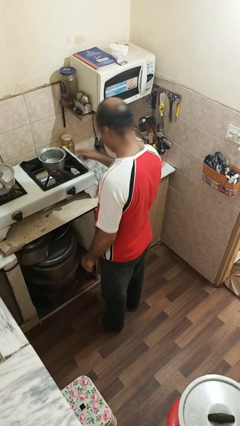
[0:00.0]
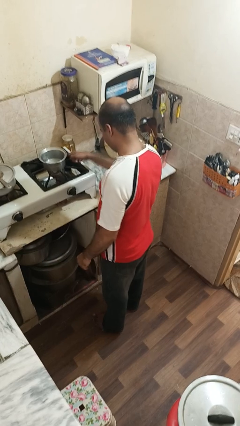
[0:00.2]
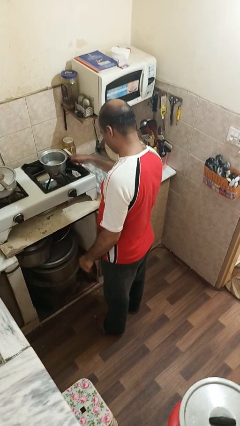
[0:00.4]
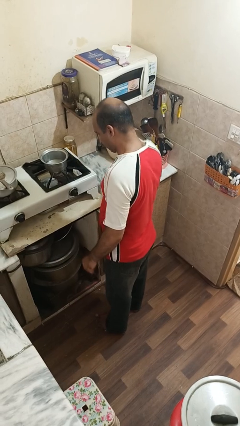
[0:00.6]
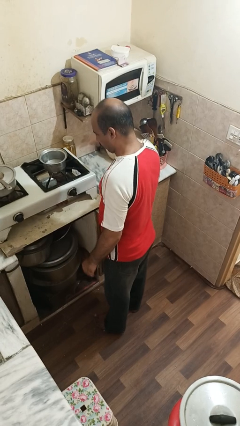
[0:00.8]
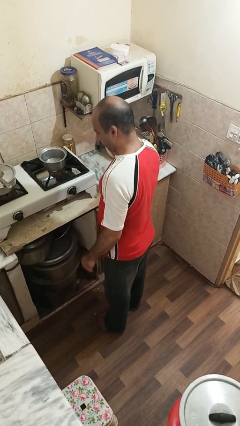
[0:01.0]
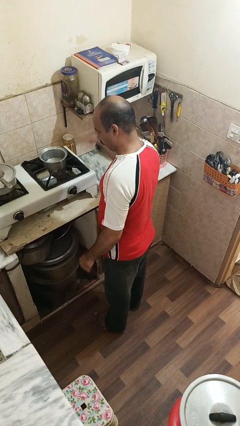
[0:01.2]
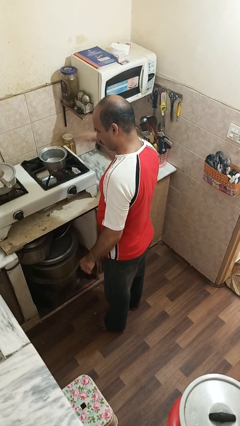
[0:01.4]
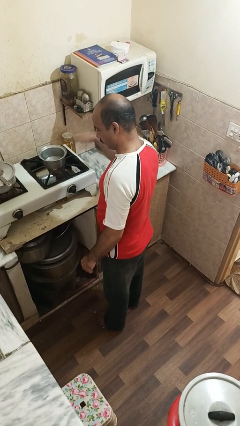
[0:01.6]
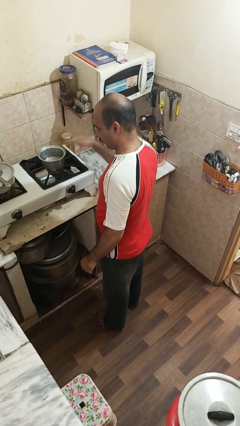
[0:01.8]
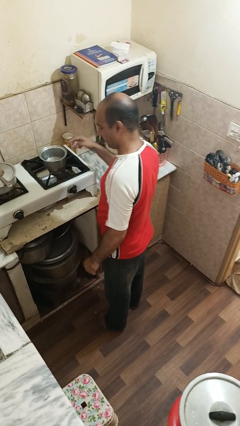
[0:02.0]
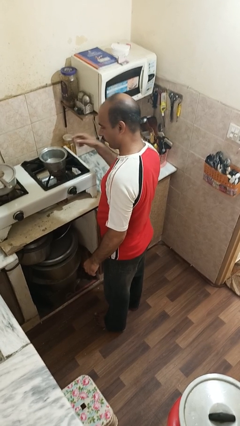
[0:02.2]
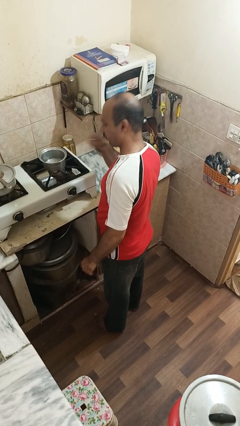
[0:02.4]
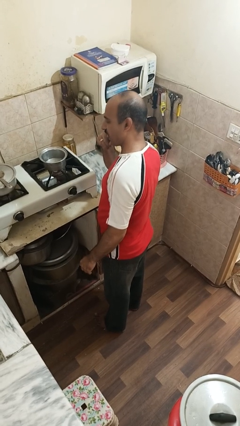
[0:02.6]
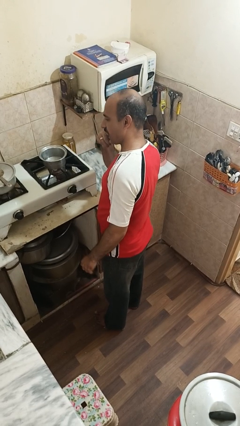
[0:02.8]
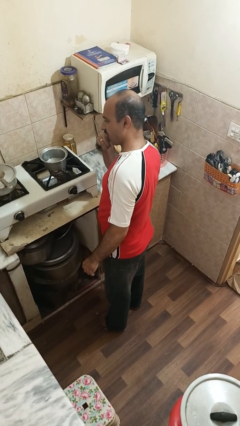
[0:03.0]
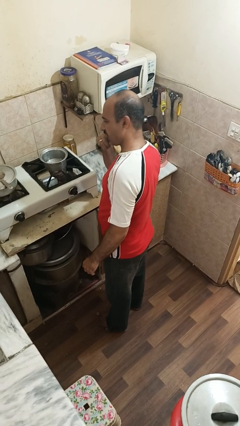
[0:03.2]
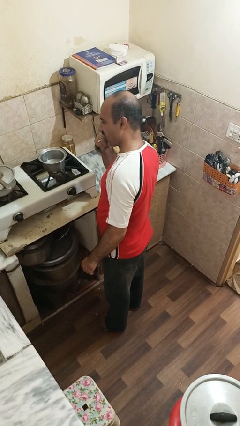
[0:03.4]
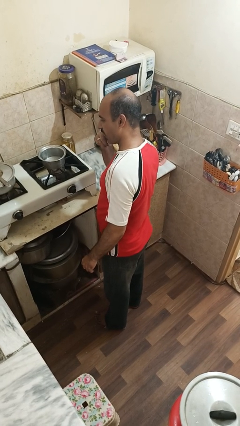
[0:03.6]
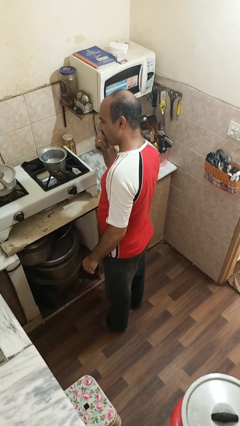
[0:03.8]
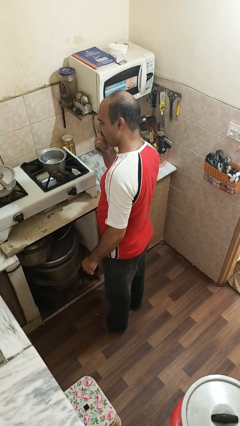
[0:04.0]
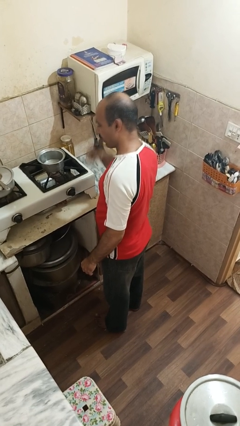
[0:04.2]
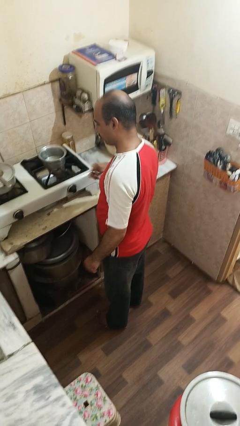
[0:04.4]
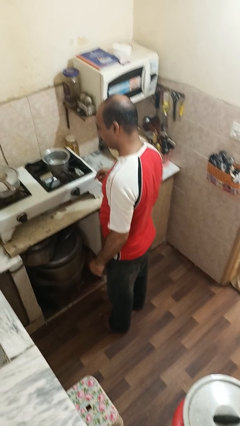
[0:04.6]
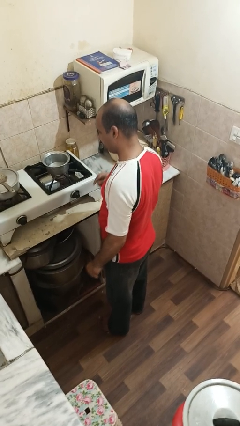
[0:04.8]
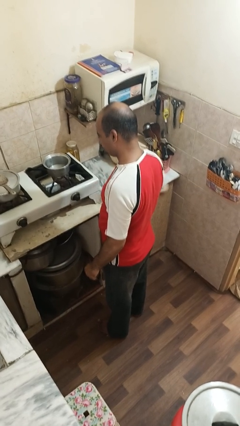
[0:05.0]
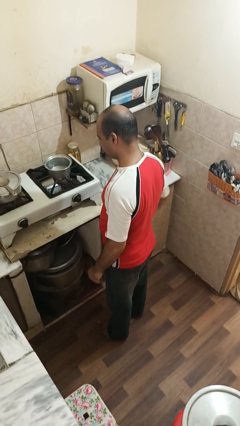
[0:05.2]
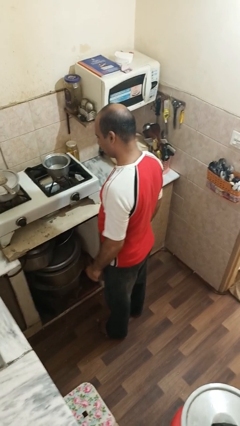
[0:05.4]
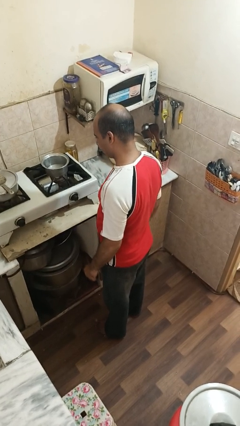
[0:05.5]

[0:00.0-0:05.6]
person burns hand

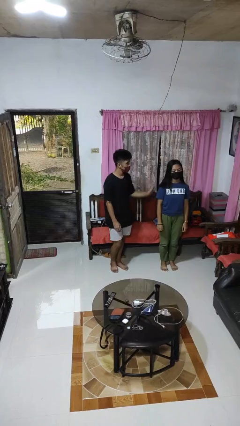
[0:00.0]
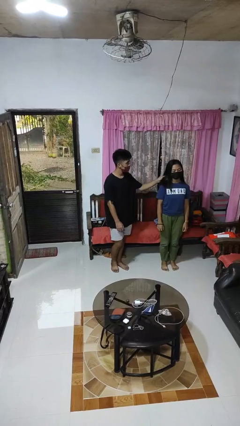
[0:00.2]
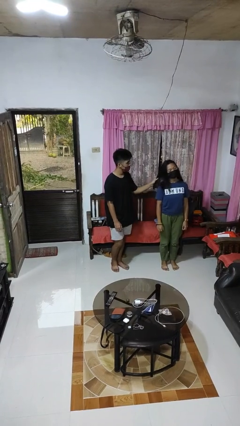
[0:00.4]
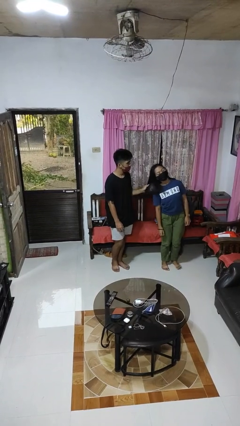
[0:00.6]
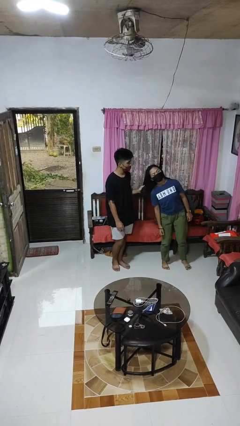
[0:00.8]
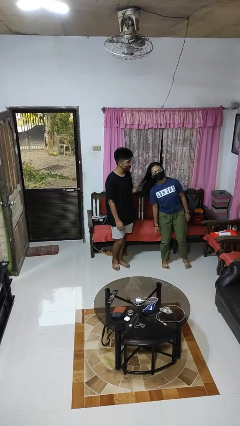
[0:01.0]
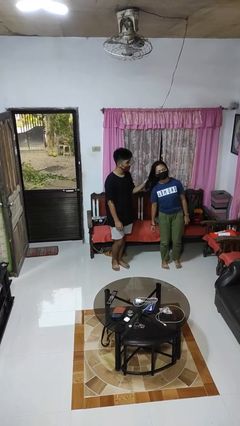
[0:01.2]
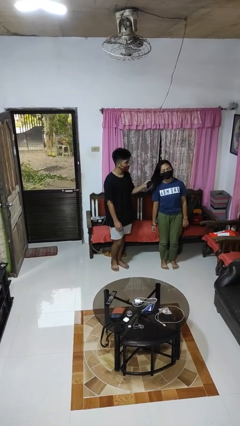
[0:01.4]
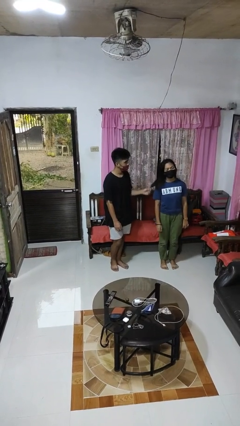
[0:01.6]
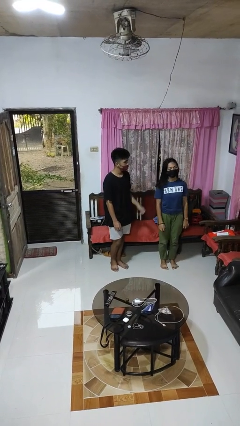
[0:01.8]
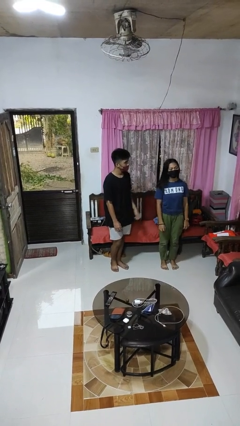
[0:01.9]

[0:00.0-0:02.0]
person grabs person by hair

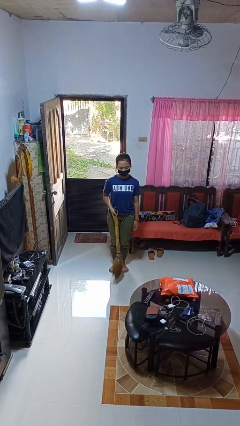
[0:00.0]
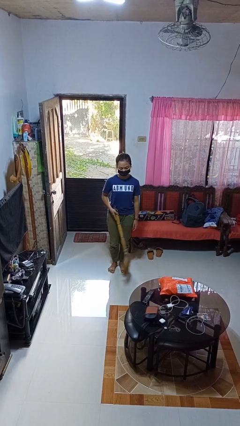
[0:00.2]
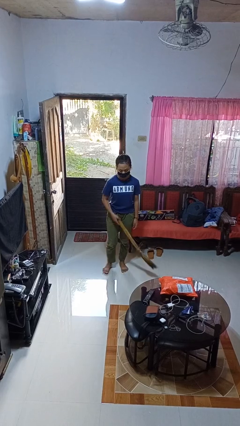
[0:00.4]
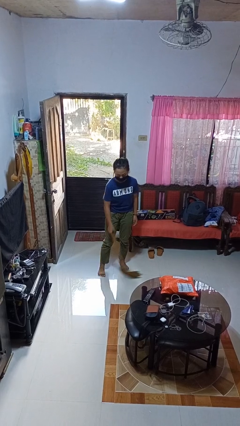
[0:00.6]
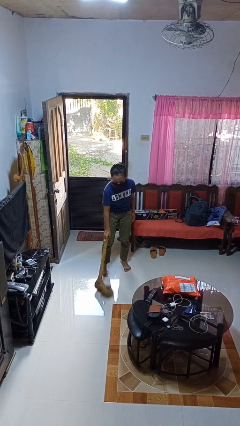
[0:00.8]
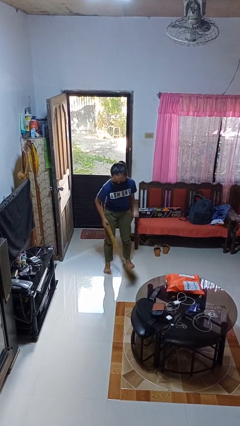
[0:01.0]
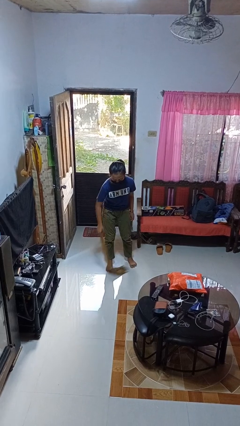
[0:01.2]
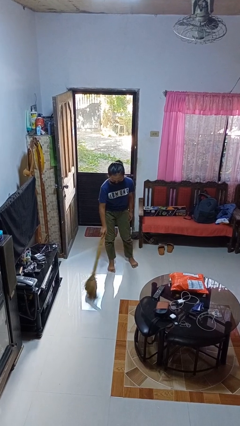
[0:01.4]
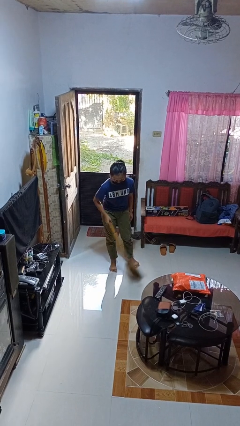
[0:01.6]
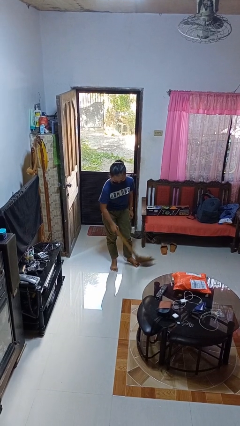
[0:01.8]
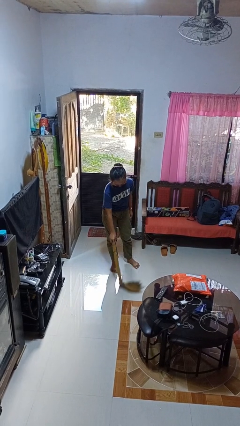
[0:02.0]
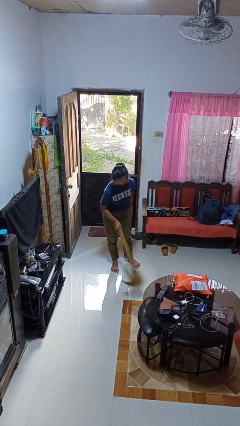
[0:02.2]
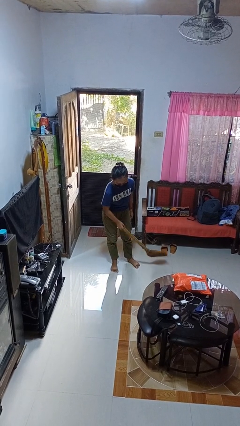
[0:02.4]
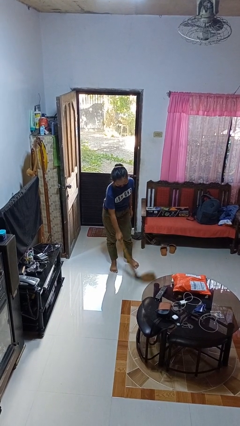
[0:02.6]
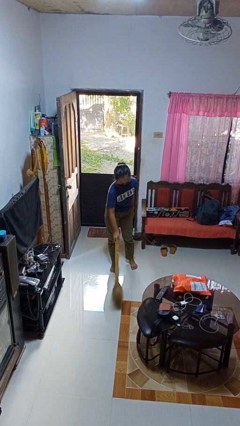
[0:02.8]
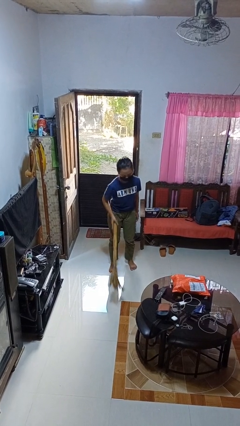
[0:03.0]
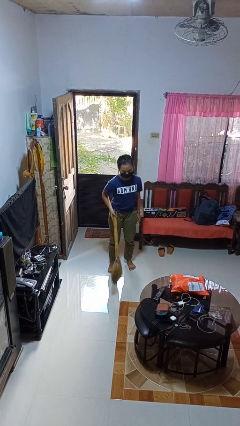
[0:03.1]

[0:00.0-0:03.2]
person sweeps floor

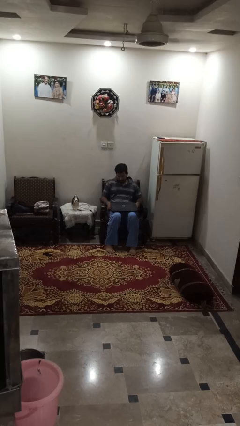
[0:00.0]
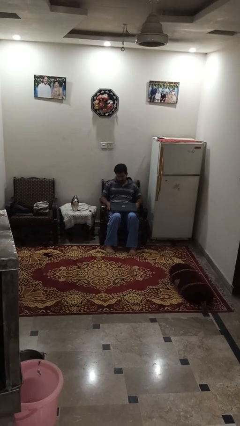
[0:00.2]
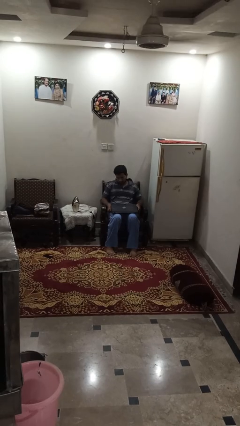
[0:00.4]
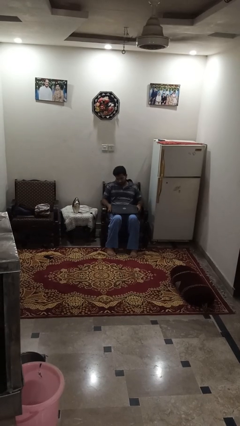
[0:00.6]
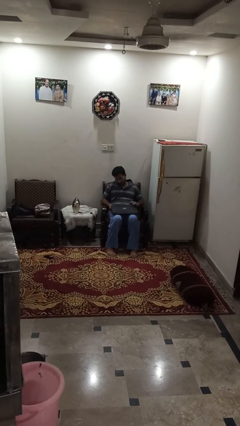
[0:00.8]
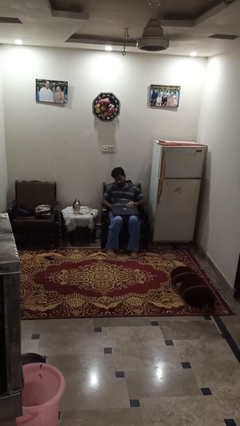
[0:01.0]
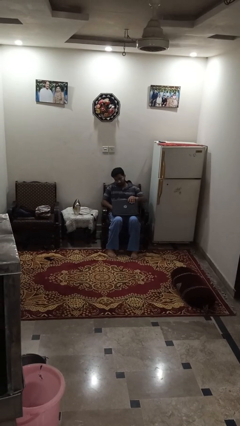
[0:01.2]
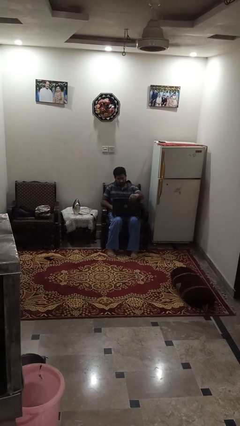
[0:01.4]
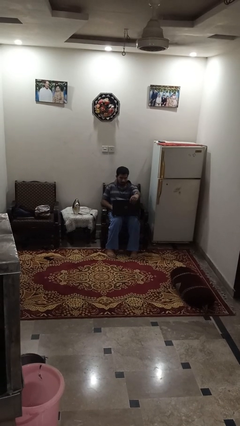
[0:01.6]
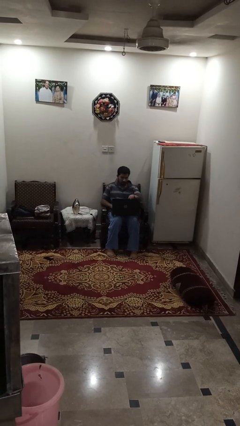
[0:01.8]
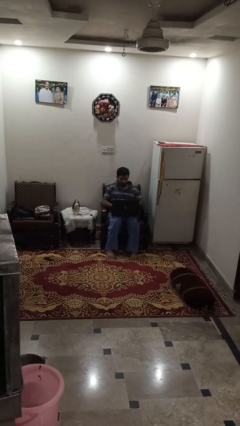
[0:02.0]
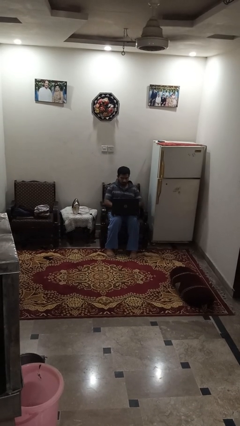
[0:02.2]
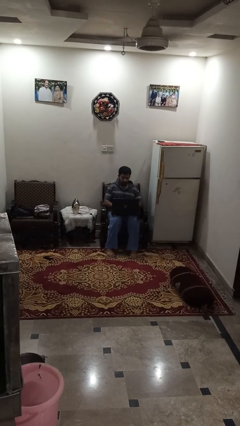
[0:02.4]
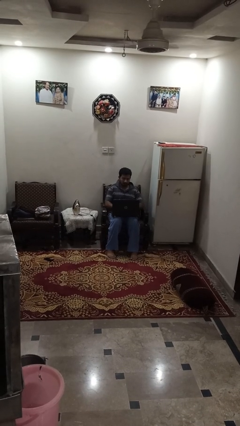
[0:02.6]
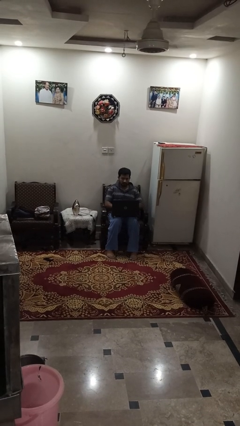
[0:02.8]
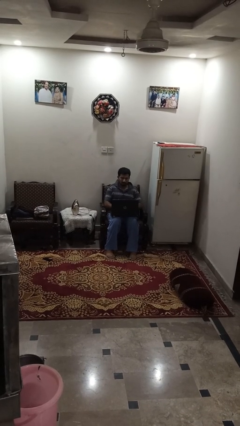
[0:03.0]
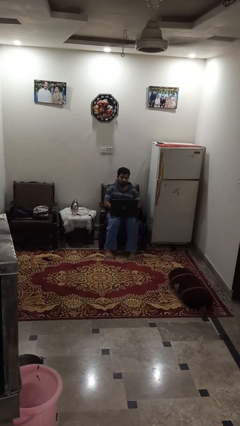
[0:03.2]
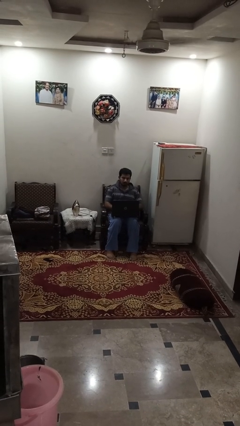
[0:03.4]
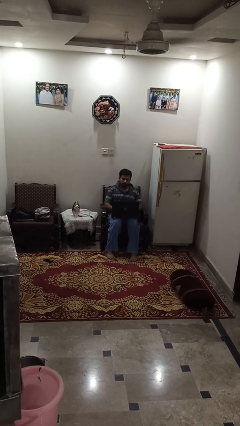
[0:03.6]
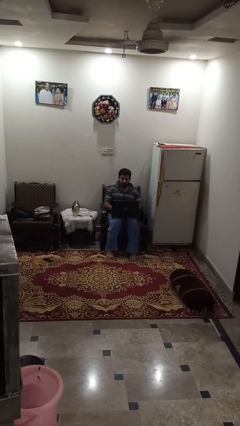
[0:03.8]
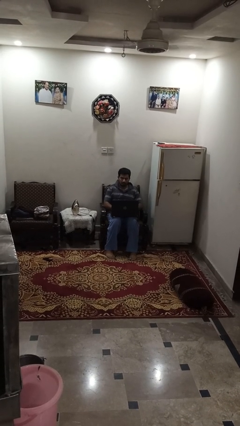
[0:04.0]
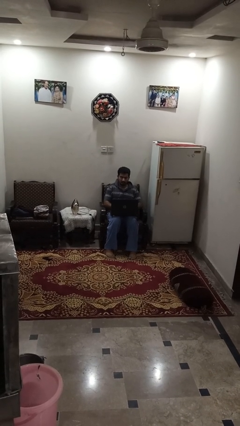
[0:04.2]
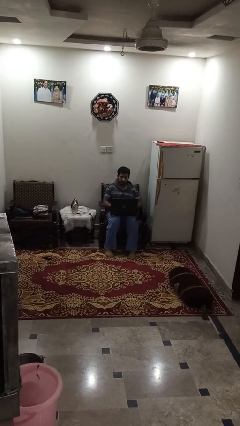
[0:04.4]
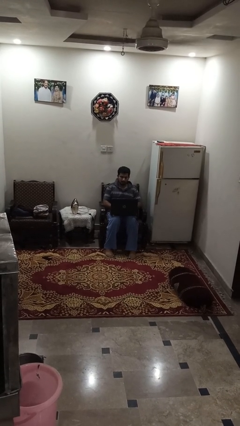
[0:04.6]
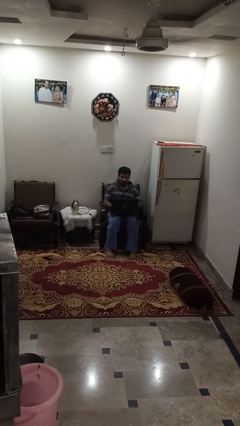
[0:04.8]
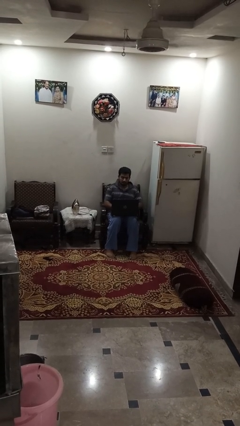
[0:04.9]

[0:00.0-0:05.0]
person opens laptop

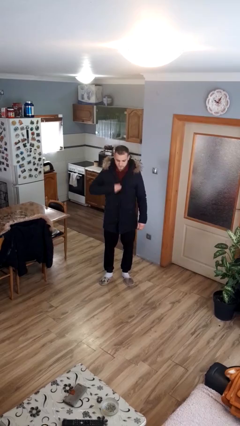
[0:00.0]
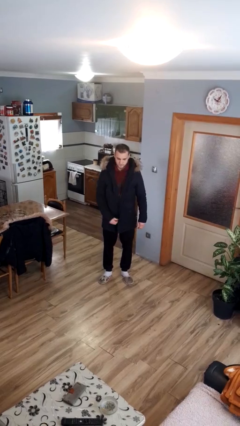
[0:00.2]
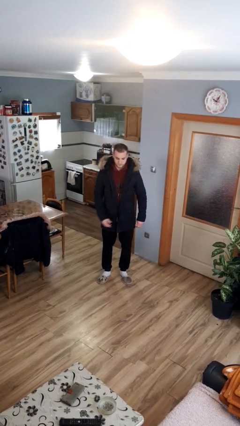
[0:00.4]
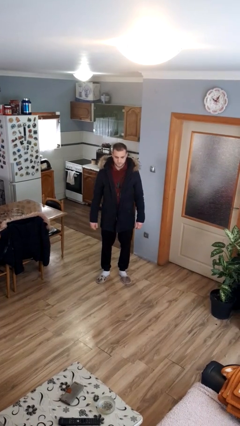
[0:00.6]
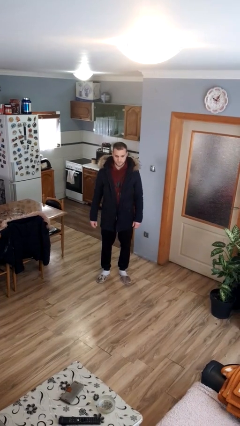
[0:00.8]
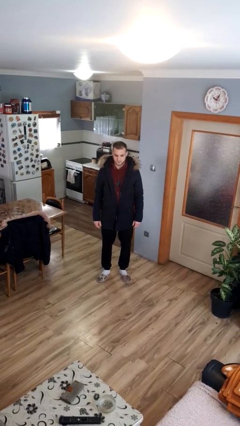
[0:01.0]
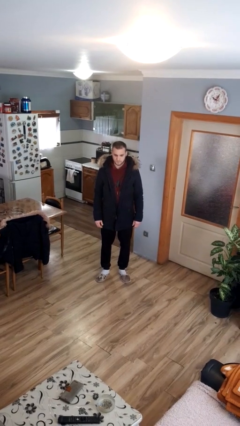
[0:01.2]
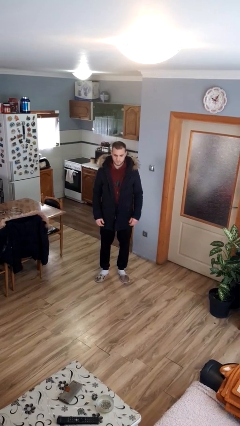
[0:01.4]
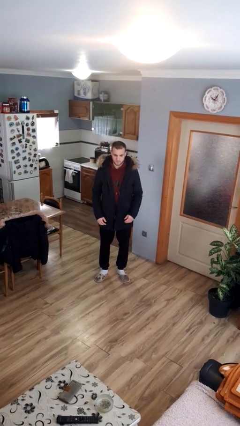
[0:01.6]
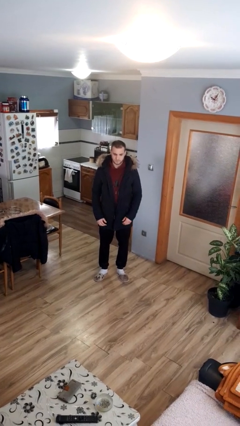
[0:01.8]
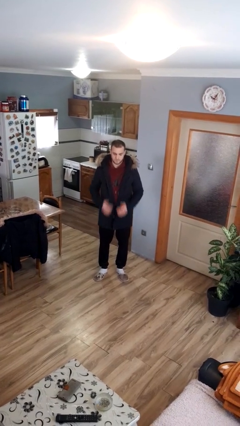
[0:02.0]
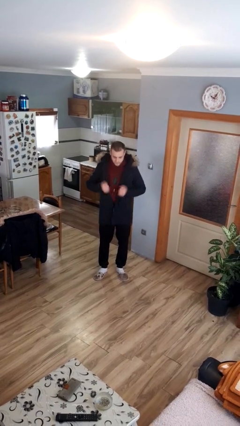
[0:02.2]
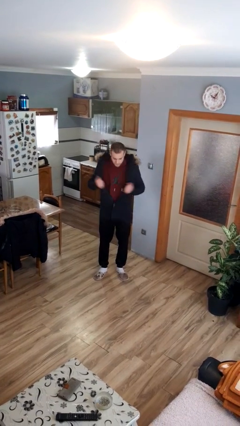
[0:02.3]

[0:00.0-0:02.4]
person unzips jacket
